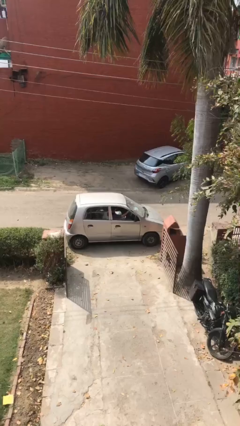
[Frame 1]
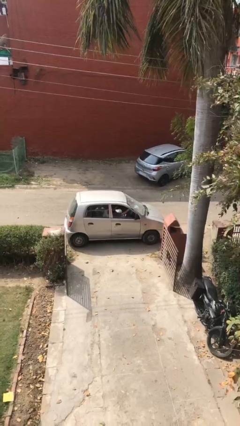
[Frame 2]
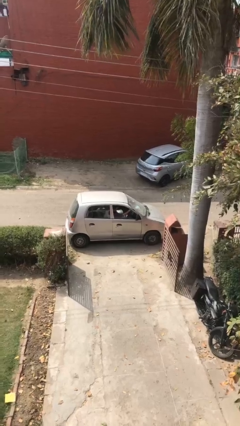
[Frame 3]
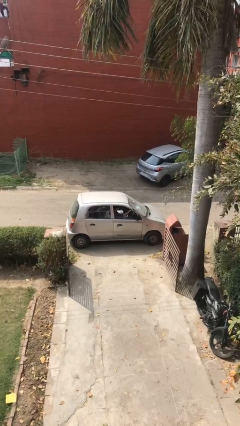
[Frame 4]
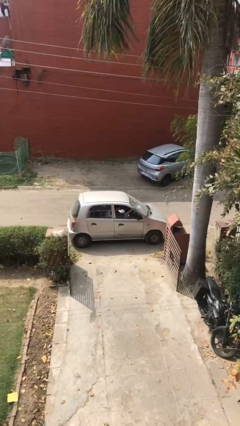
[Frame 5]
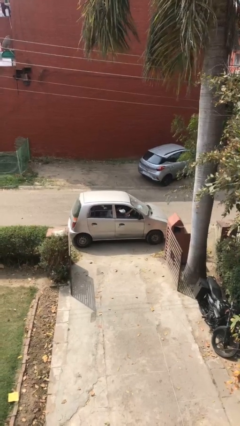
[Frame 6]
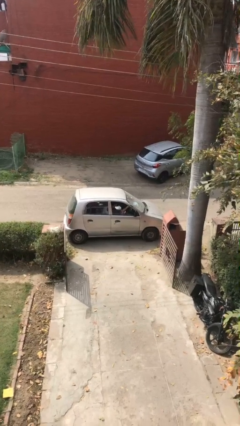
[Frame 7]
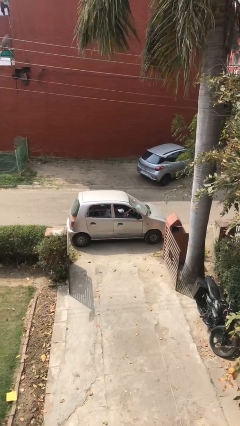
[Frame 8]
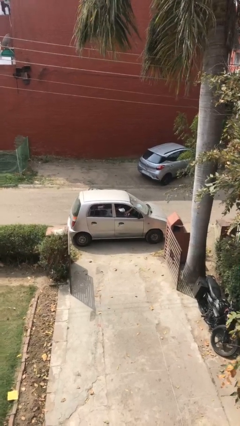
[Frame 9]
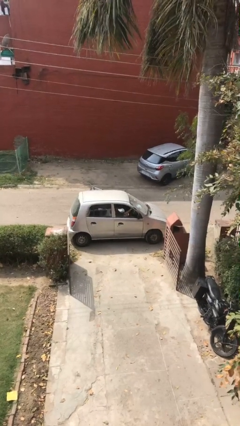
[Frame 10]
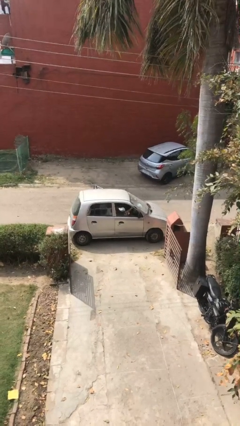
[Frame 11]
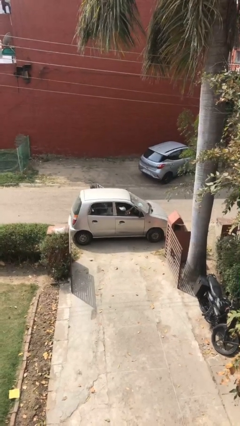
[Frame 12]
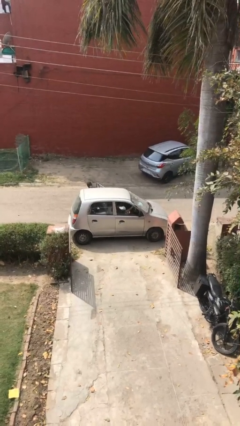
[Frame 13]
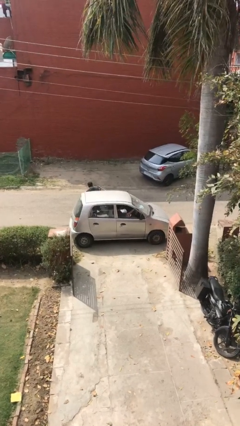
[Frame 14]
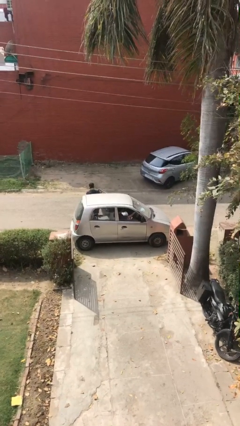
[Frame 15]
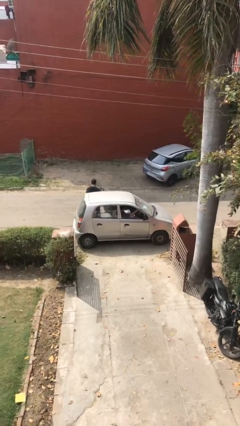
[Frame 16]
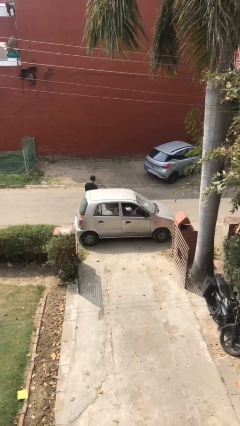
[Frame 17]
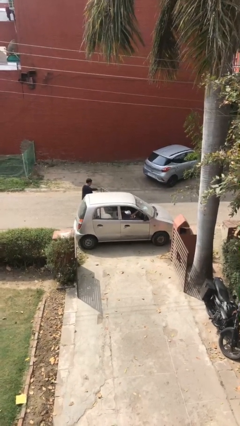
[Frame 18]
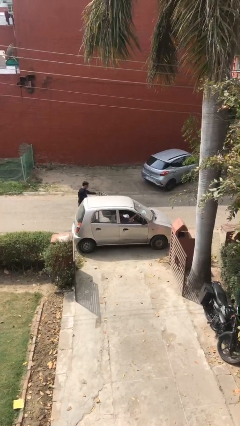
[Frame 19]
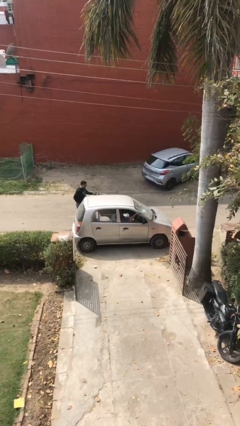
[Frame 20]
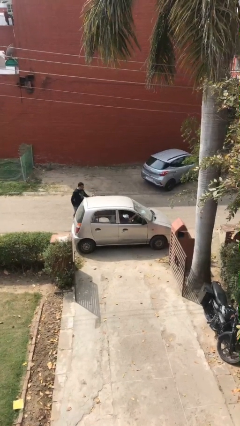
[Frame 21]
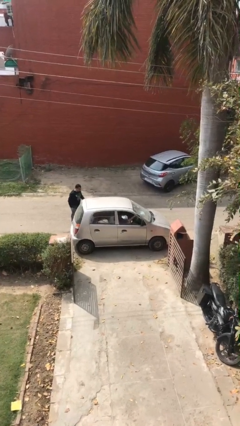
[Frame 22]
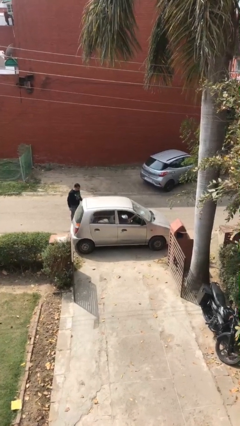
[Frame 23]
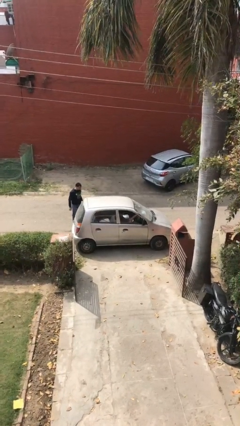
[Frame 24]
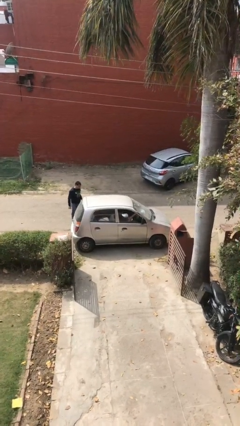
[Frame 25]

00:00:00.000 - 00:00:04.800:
car drops off person

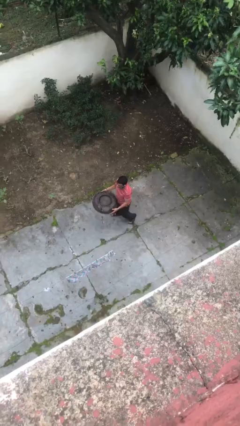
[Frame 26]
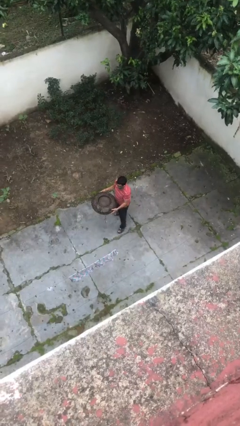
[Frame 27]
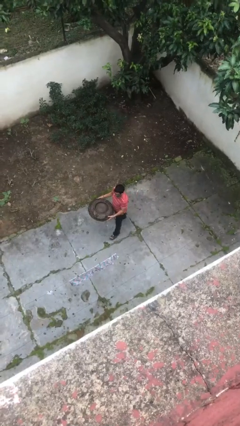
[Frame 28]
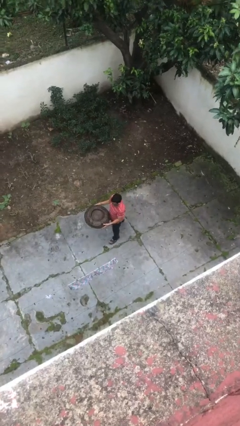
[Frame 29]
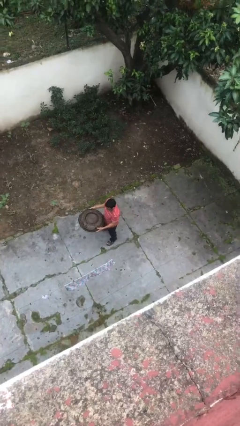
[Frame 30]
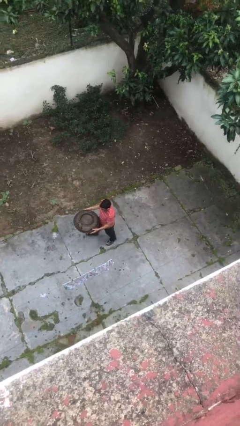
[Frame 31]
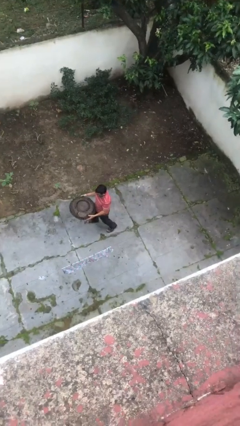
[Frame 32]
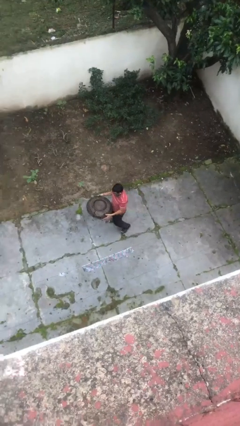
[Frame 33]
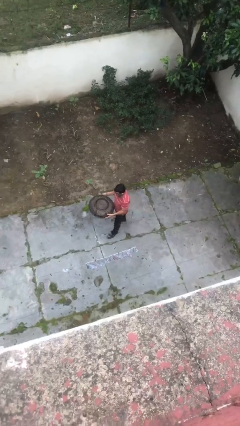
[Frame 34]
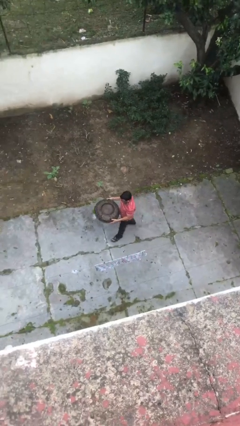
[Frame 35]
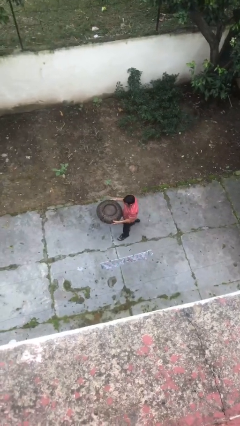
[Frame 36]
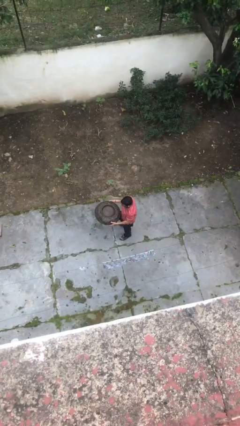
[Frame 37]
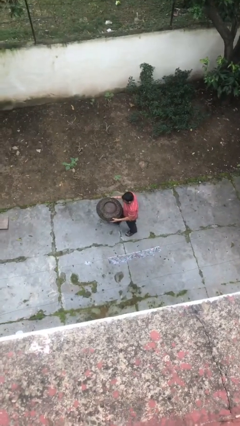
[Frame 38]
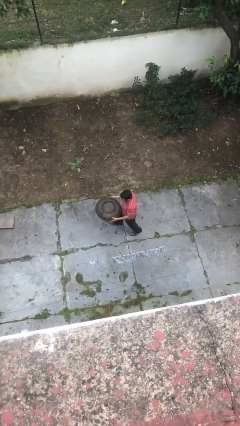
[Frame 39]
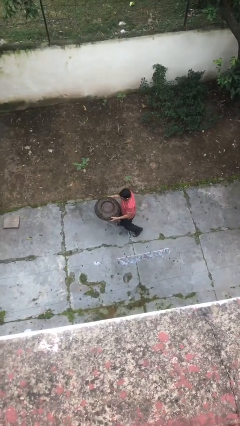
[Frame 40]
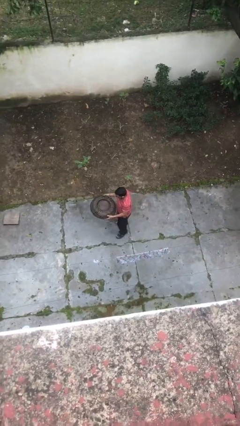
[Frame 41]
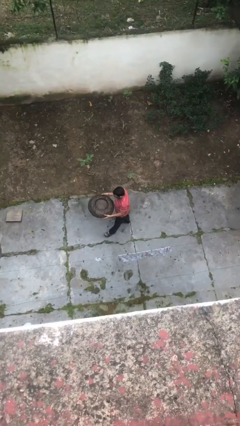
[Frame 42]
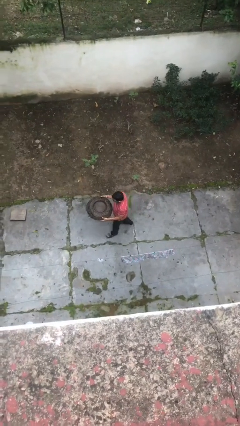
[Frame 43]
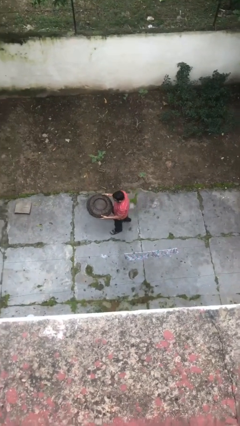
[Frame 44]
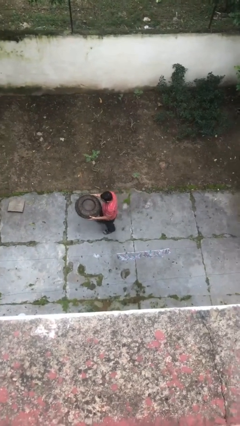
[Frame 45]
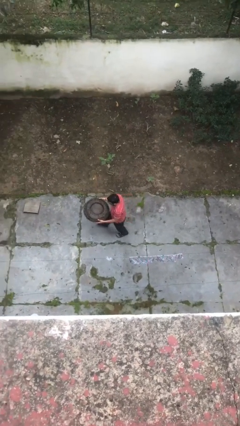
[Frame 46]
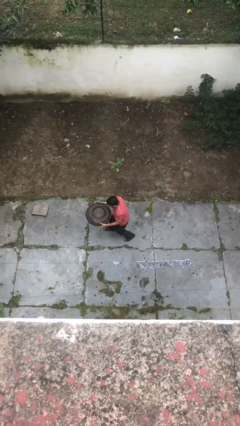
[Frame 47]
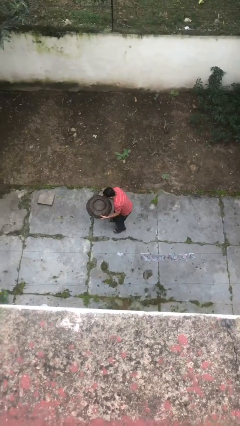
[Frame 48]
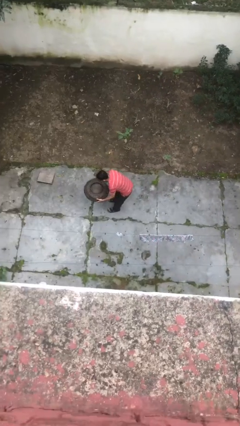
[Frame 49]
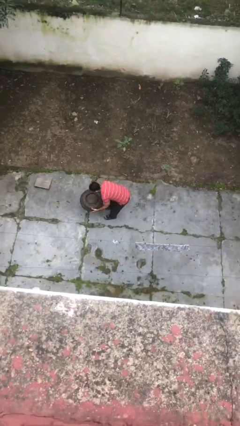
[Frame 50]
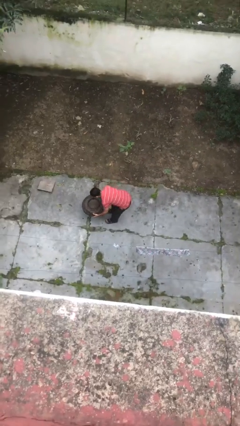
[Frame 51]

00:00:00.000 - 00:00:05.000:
person carries heavy object

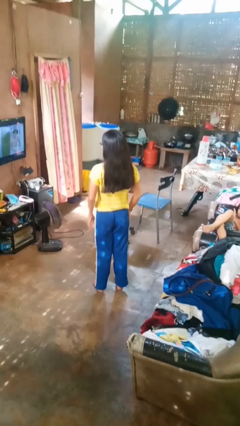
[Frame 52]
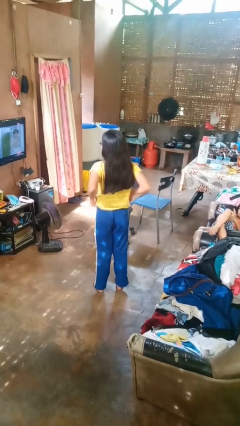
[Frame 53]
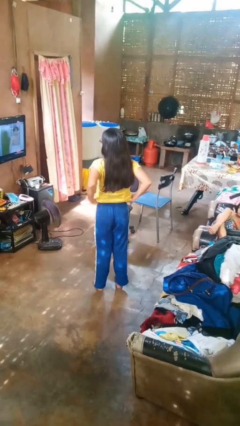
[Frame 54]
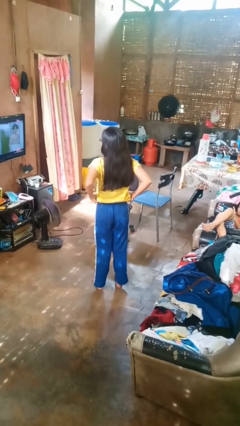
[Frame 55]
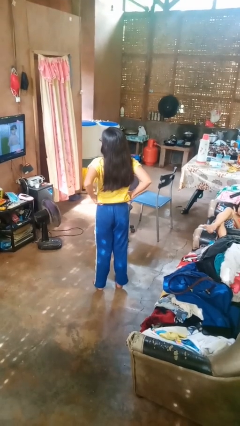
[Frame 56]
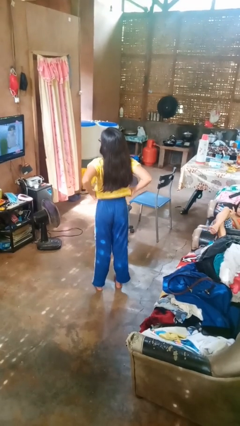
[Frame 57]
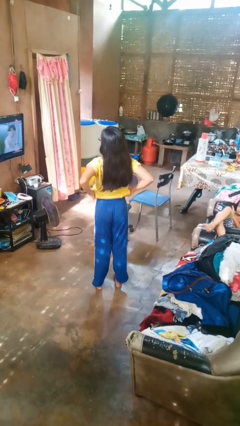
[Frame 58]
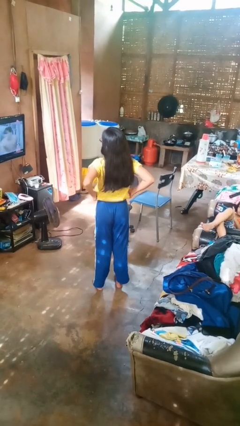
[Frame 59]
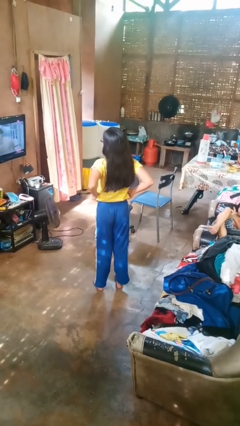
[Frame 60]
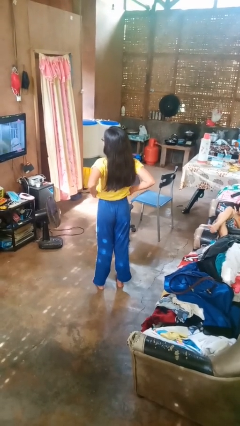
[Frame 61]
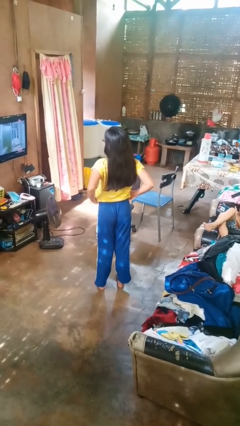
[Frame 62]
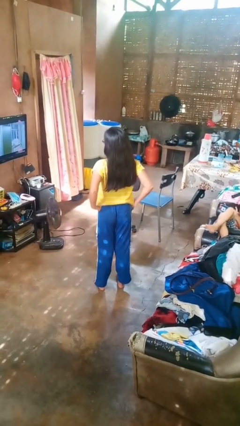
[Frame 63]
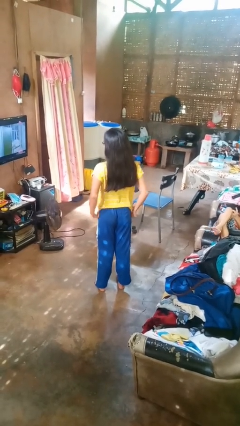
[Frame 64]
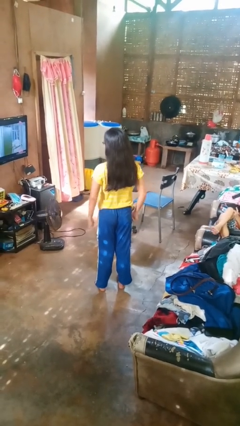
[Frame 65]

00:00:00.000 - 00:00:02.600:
person hikes up pants

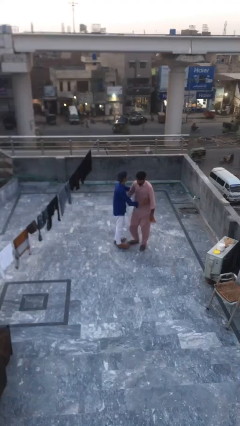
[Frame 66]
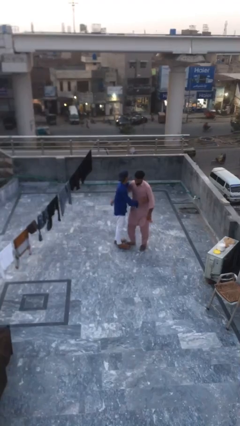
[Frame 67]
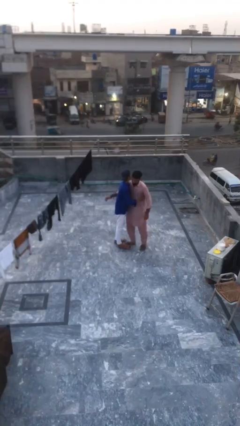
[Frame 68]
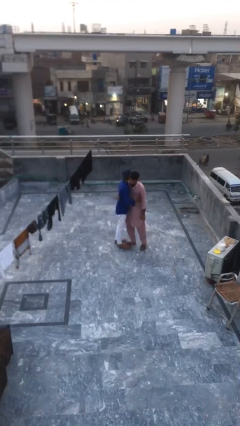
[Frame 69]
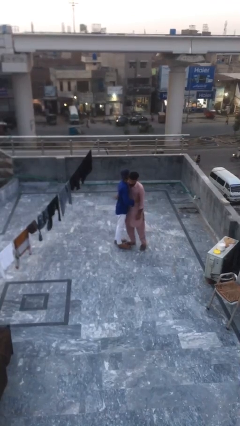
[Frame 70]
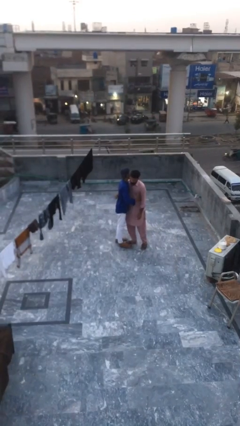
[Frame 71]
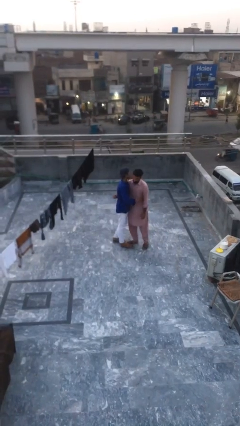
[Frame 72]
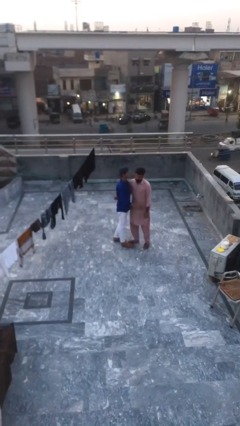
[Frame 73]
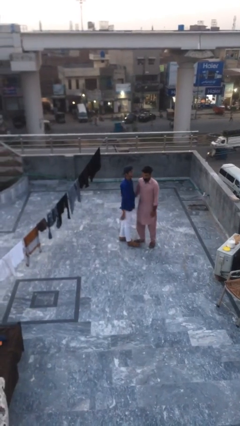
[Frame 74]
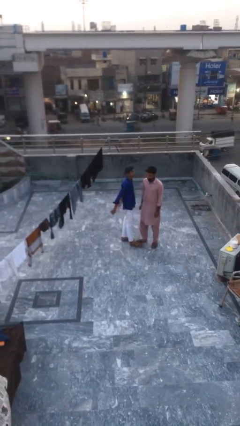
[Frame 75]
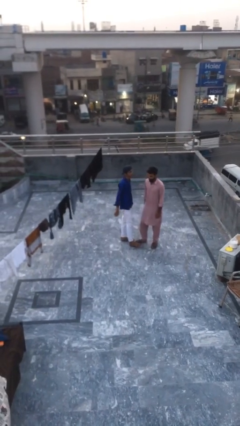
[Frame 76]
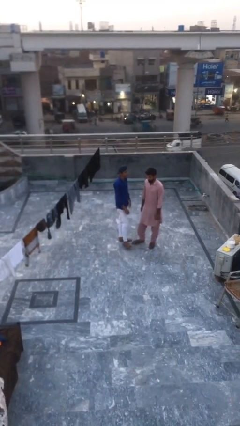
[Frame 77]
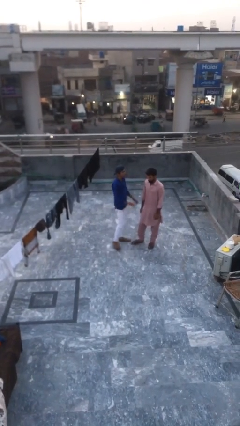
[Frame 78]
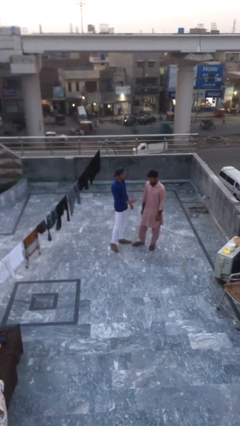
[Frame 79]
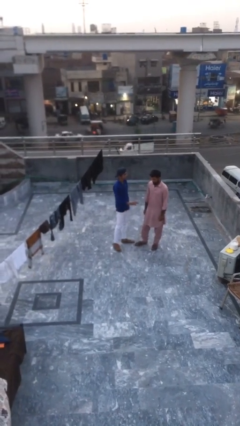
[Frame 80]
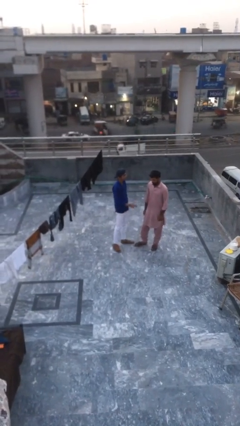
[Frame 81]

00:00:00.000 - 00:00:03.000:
person embraces person

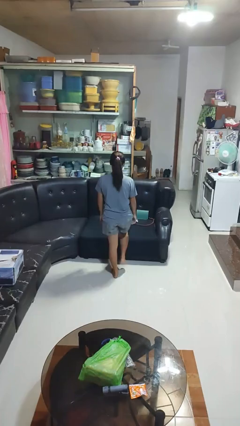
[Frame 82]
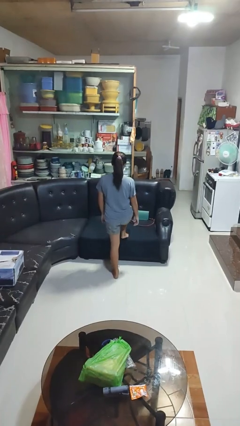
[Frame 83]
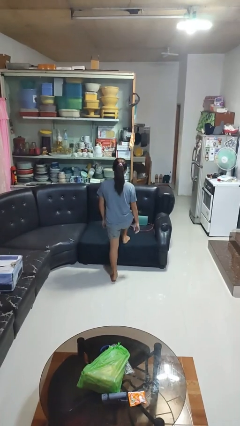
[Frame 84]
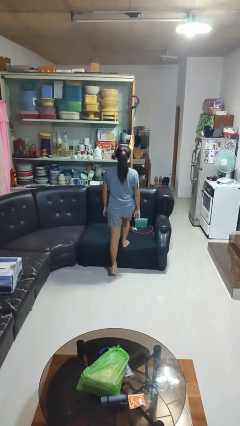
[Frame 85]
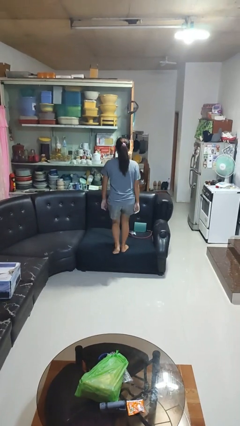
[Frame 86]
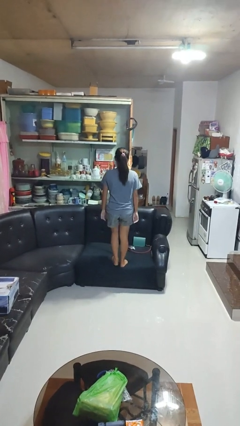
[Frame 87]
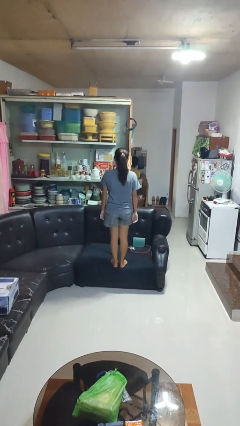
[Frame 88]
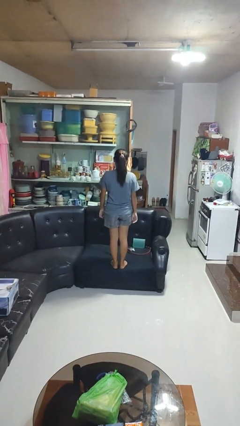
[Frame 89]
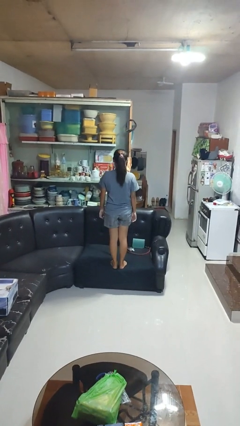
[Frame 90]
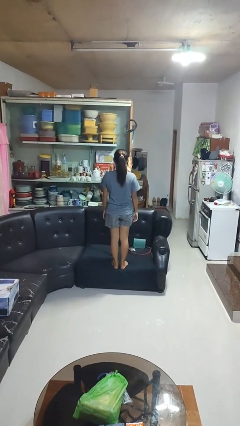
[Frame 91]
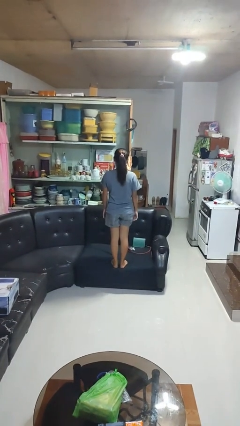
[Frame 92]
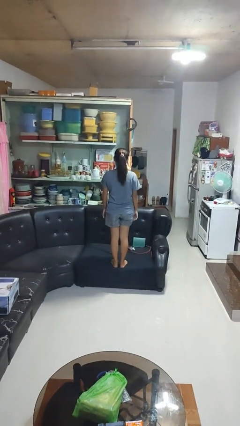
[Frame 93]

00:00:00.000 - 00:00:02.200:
person climbs on couch
